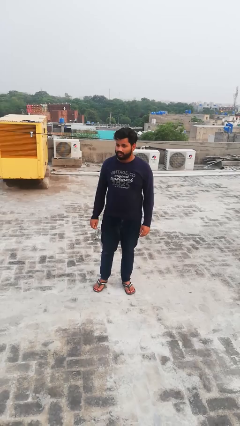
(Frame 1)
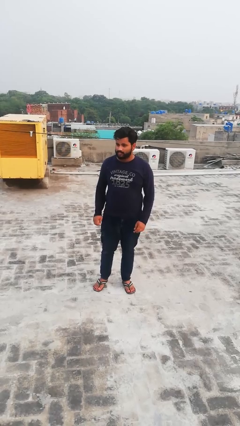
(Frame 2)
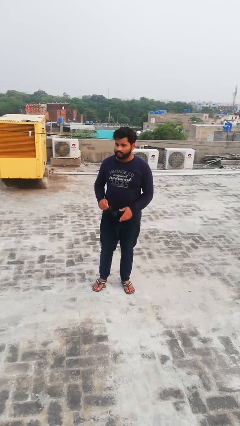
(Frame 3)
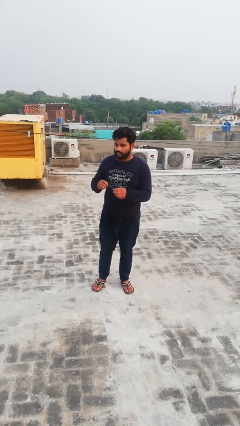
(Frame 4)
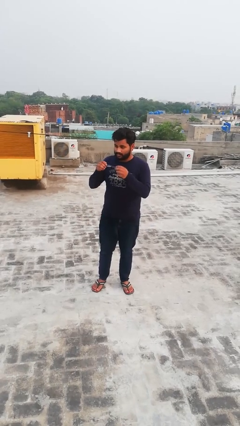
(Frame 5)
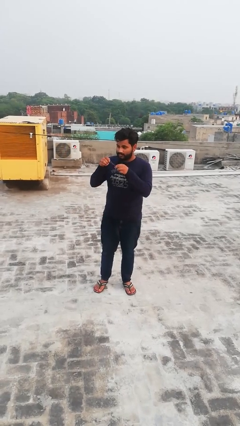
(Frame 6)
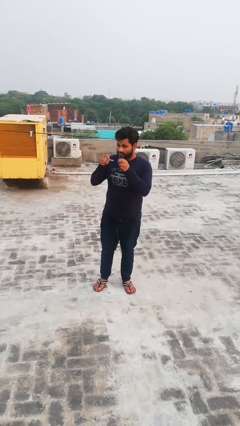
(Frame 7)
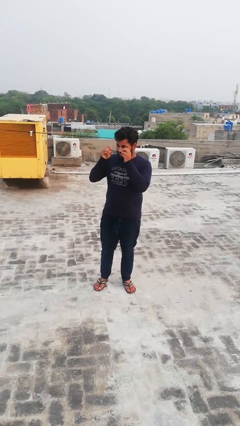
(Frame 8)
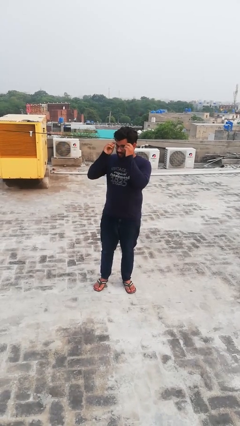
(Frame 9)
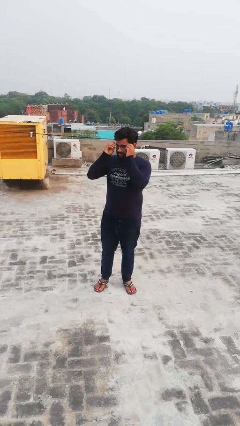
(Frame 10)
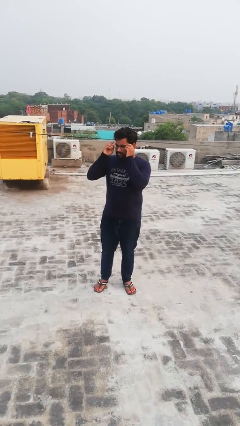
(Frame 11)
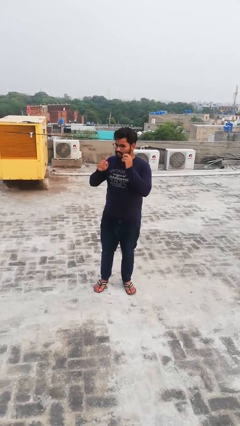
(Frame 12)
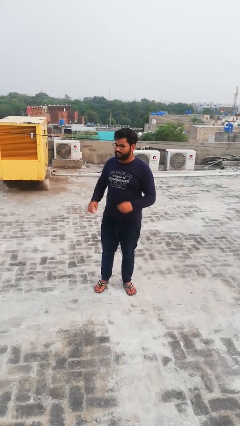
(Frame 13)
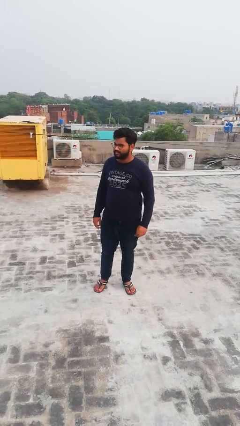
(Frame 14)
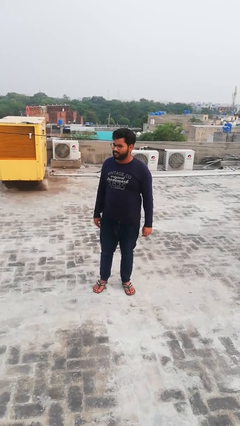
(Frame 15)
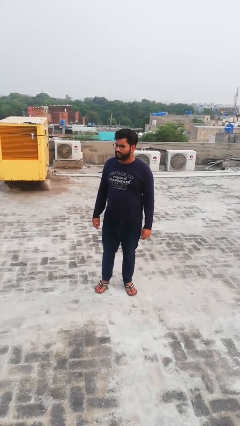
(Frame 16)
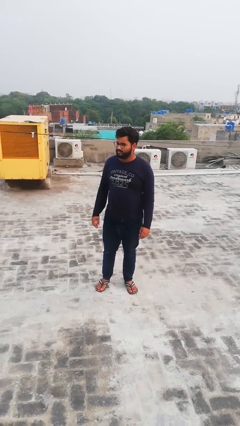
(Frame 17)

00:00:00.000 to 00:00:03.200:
person puts on glasses

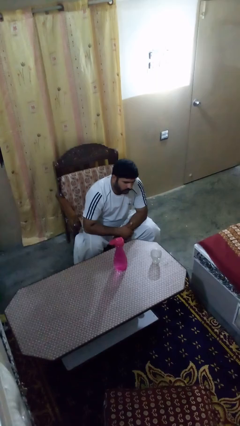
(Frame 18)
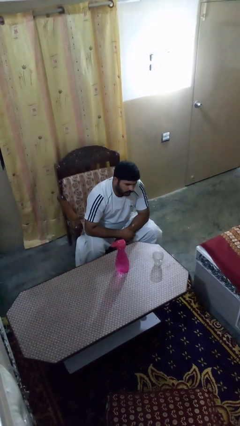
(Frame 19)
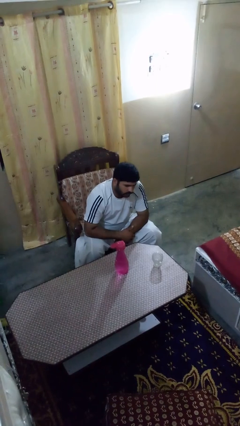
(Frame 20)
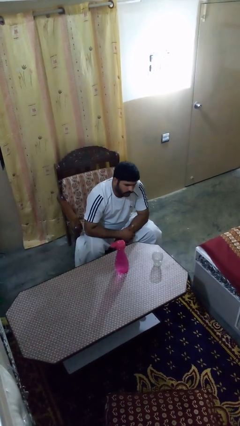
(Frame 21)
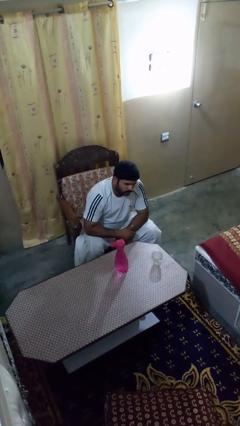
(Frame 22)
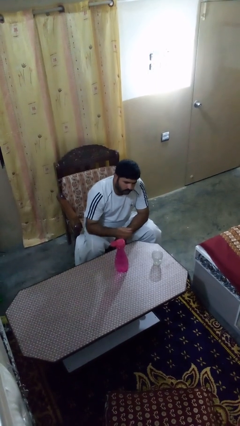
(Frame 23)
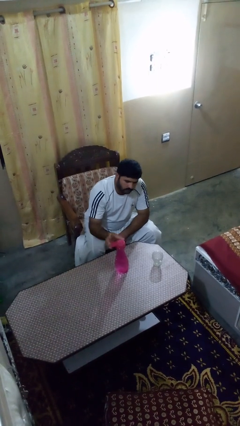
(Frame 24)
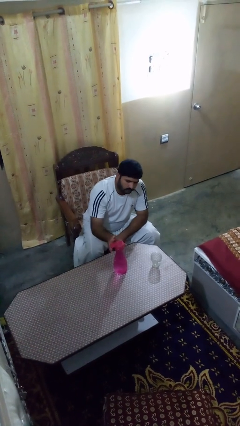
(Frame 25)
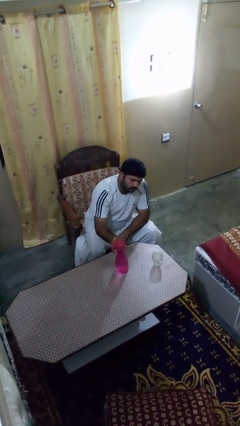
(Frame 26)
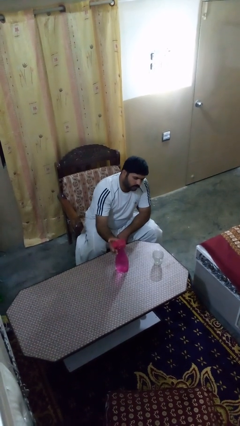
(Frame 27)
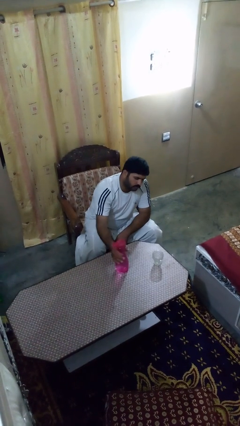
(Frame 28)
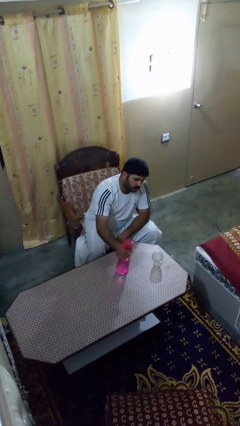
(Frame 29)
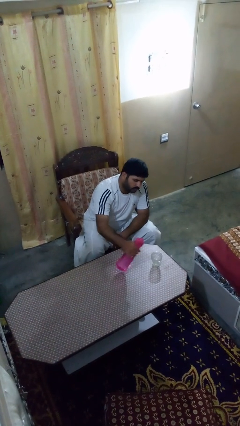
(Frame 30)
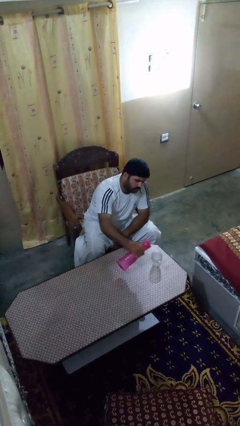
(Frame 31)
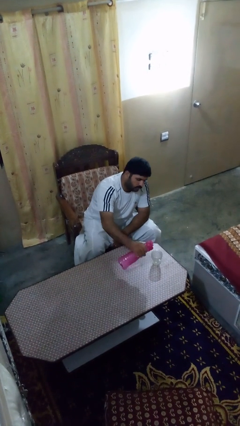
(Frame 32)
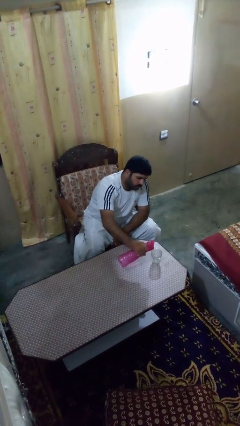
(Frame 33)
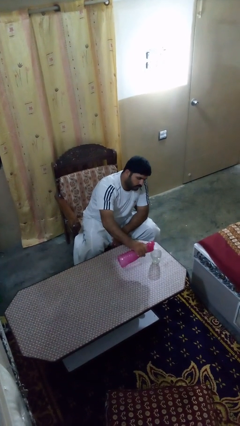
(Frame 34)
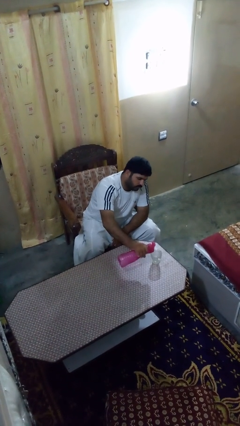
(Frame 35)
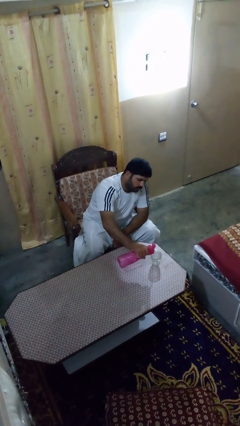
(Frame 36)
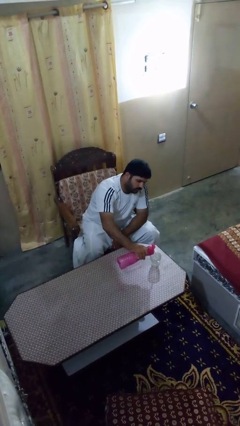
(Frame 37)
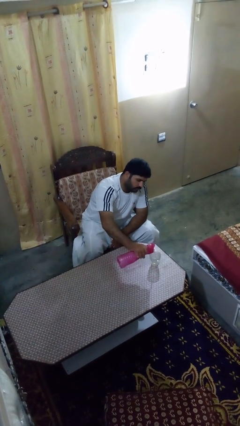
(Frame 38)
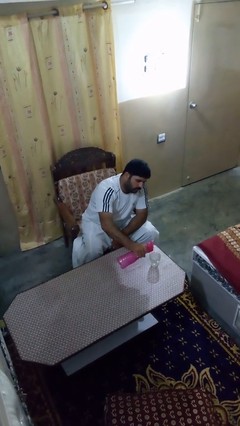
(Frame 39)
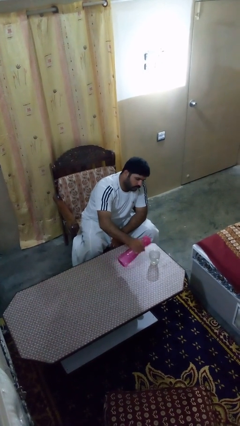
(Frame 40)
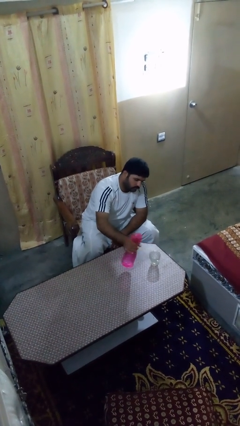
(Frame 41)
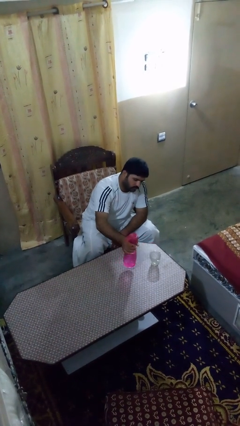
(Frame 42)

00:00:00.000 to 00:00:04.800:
person pours liquid into cup

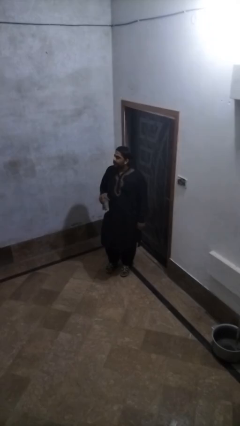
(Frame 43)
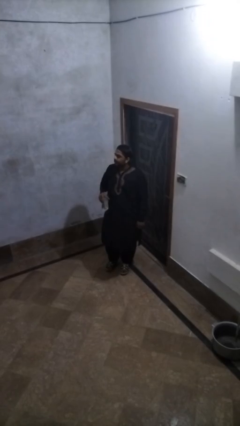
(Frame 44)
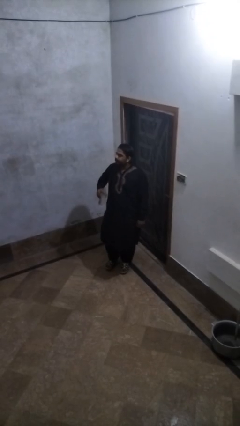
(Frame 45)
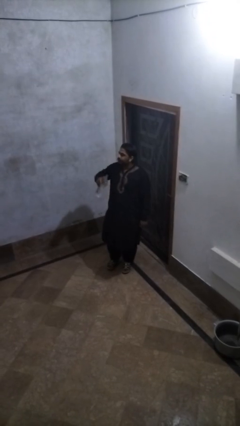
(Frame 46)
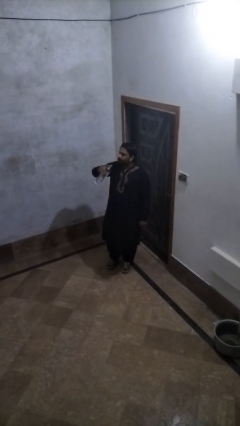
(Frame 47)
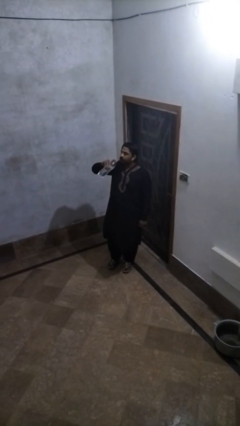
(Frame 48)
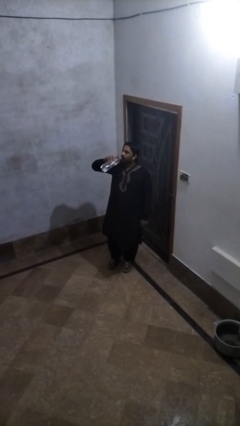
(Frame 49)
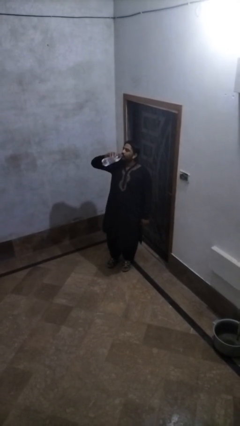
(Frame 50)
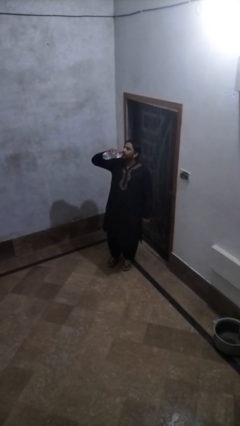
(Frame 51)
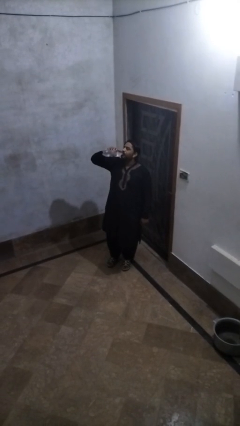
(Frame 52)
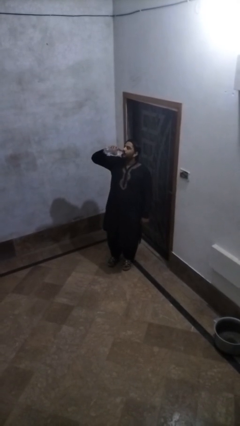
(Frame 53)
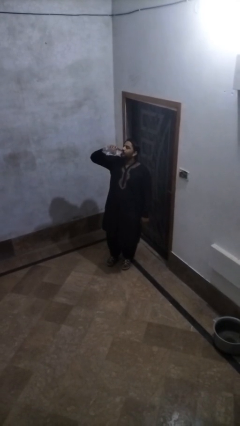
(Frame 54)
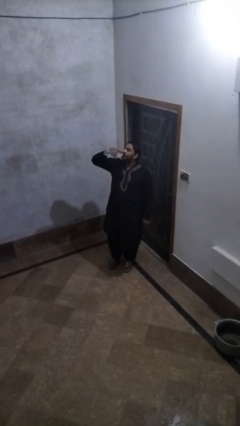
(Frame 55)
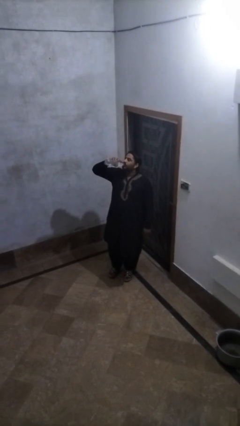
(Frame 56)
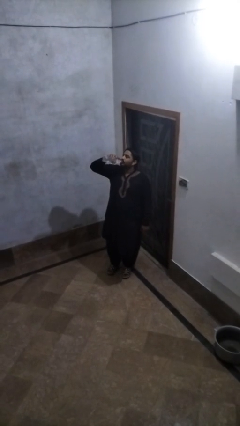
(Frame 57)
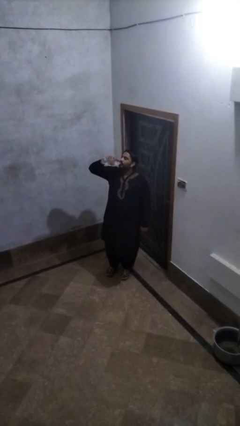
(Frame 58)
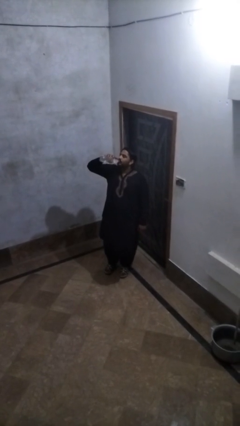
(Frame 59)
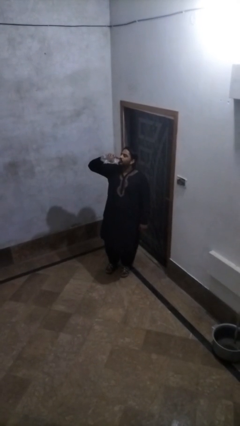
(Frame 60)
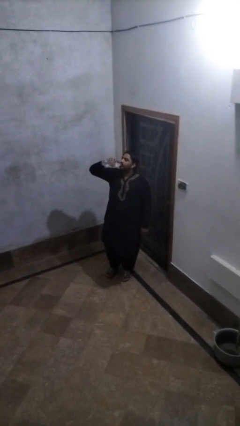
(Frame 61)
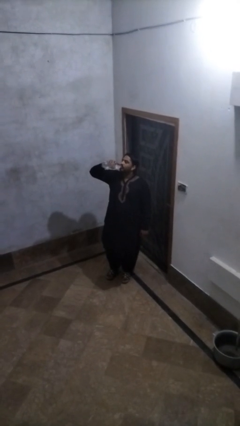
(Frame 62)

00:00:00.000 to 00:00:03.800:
person drinks from bottle

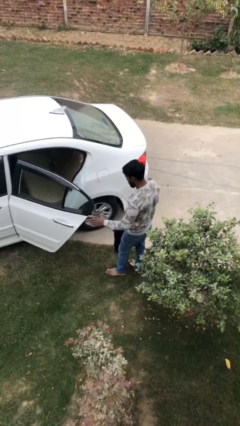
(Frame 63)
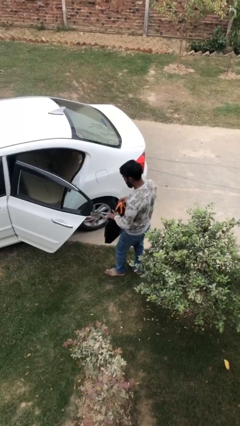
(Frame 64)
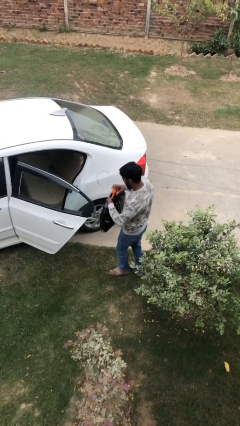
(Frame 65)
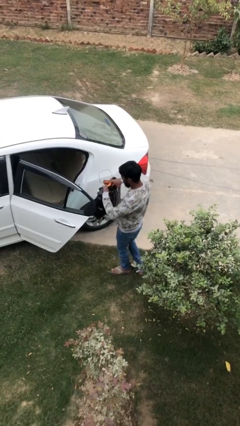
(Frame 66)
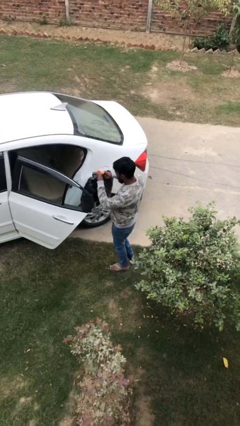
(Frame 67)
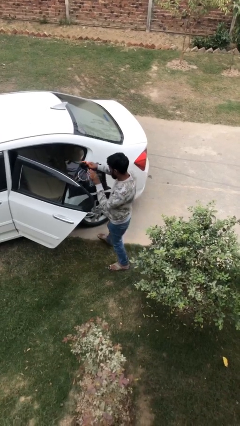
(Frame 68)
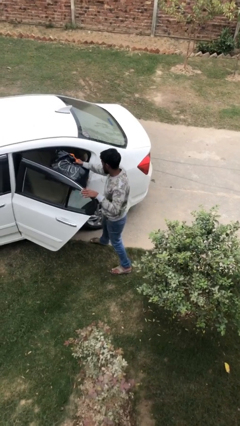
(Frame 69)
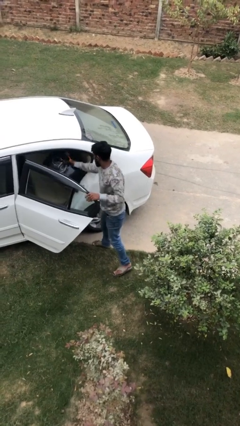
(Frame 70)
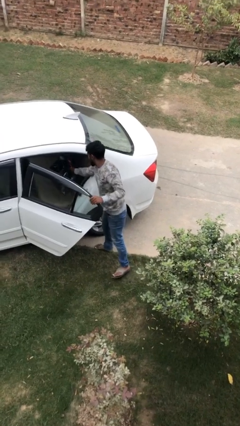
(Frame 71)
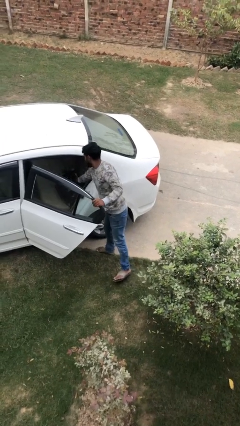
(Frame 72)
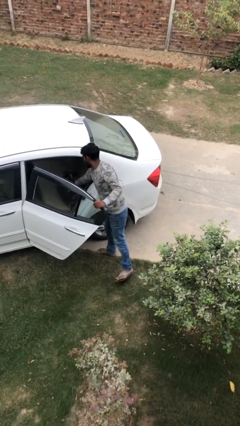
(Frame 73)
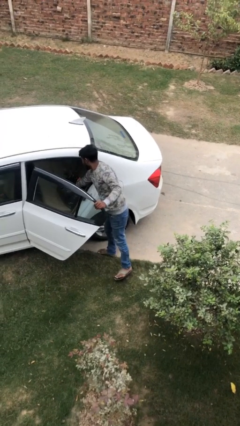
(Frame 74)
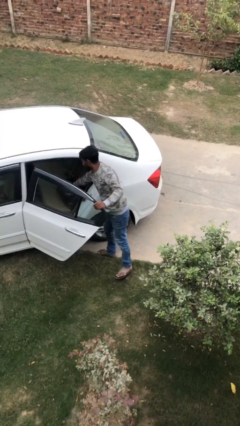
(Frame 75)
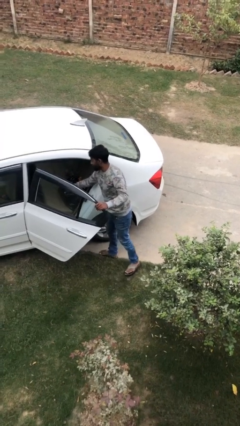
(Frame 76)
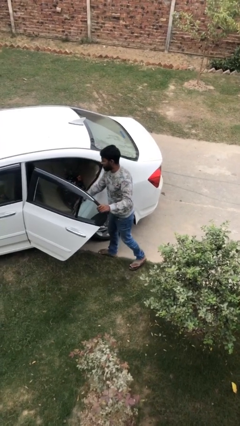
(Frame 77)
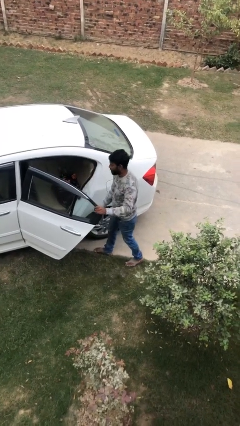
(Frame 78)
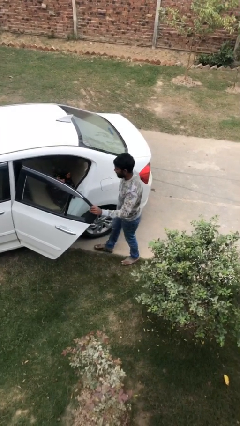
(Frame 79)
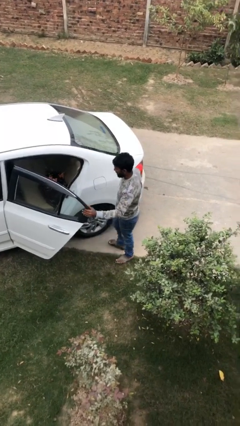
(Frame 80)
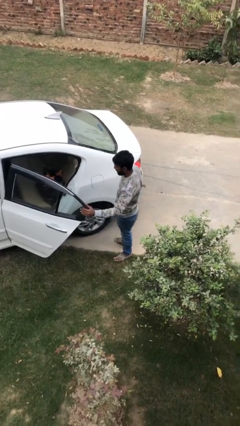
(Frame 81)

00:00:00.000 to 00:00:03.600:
person loads car

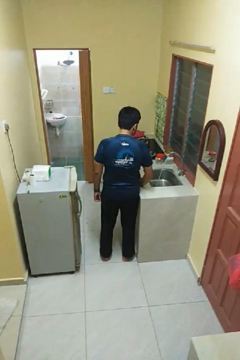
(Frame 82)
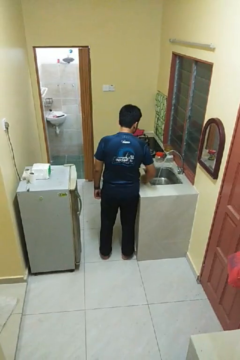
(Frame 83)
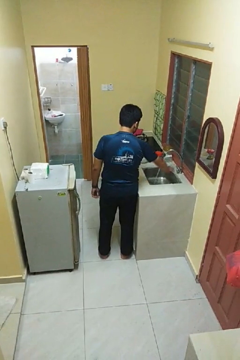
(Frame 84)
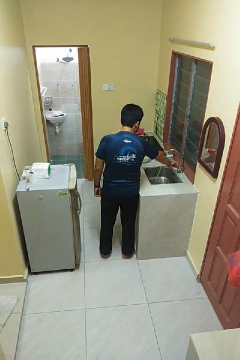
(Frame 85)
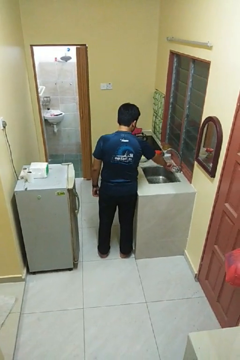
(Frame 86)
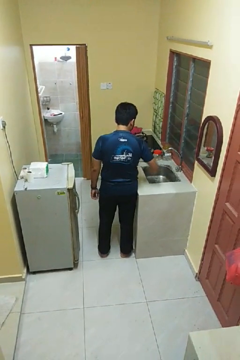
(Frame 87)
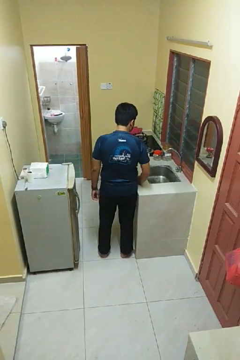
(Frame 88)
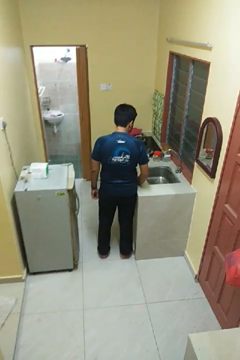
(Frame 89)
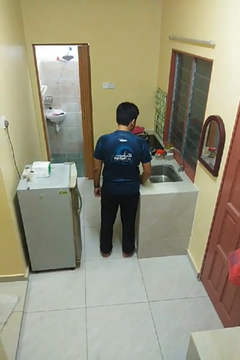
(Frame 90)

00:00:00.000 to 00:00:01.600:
person turns off faucet

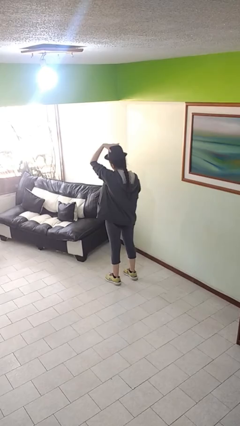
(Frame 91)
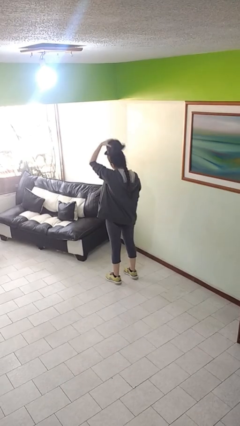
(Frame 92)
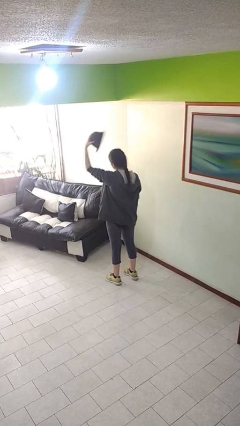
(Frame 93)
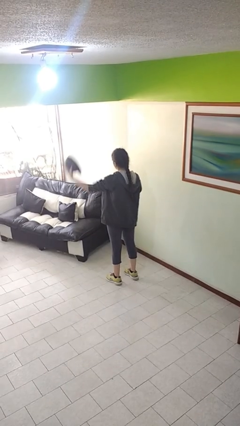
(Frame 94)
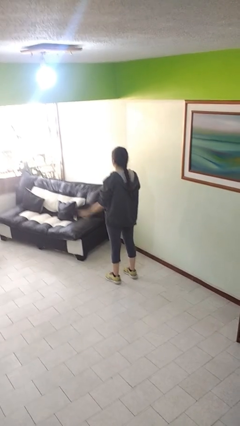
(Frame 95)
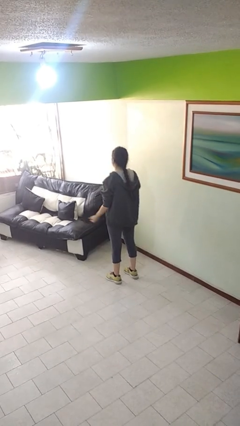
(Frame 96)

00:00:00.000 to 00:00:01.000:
person takes off hat
